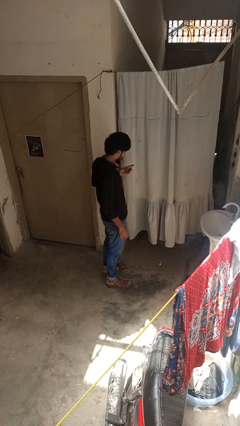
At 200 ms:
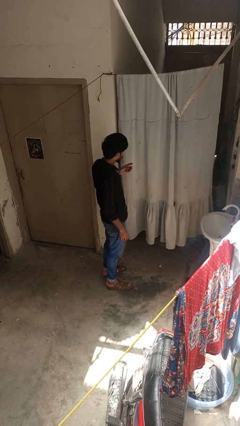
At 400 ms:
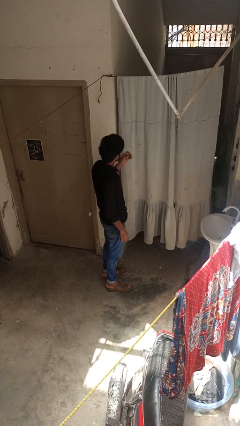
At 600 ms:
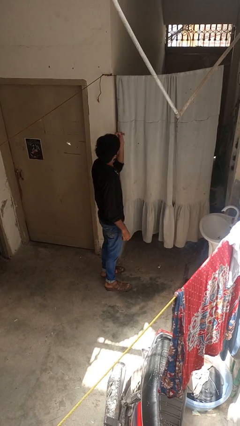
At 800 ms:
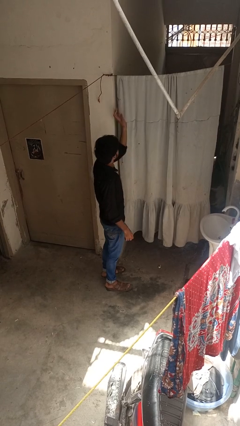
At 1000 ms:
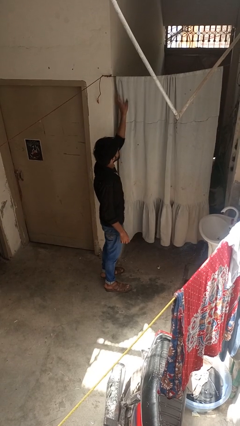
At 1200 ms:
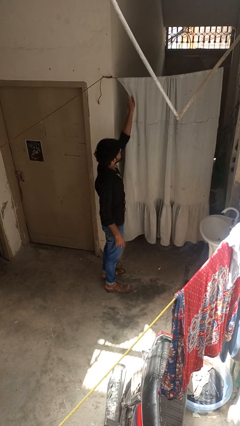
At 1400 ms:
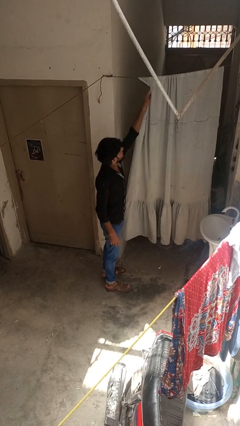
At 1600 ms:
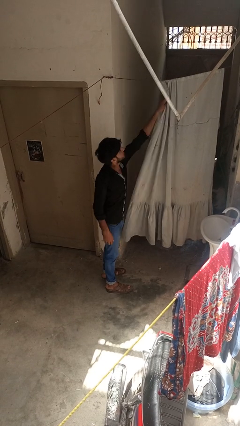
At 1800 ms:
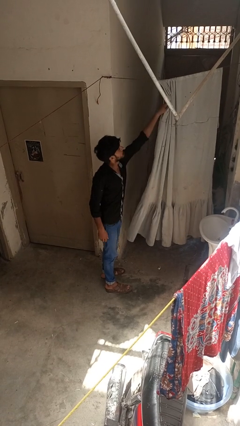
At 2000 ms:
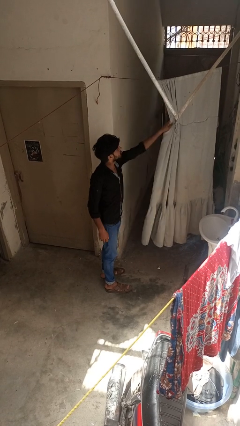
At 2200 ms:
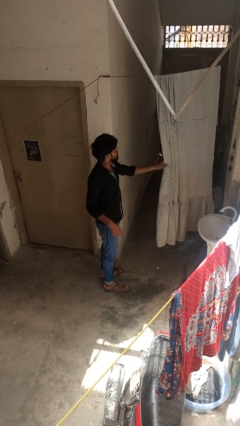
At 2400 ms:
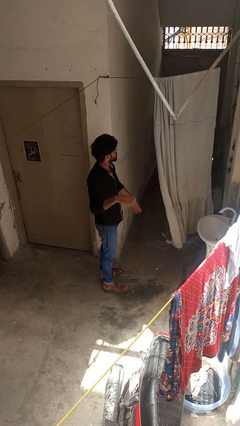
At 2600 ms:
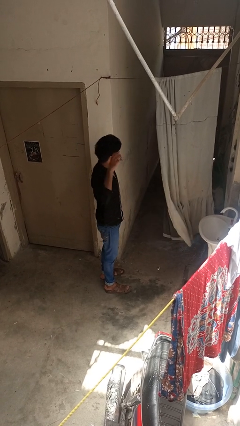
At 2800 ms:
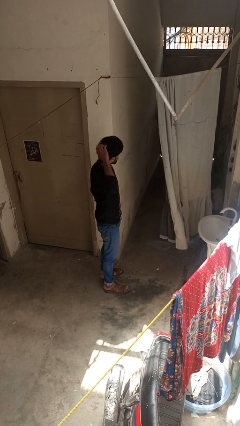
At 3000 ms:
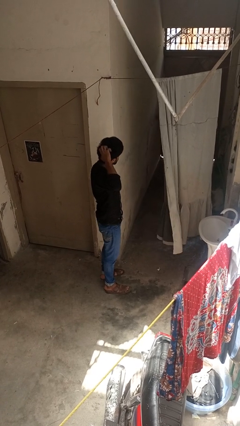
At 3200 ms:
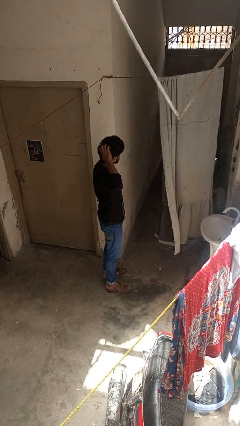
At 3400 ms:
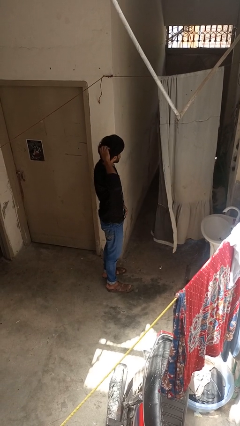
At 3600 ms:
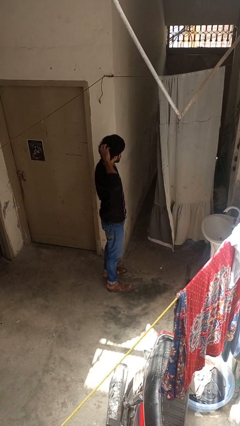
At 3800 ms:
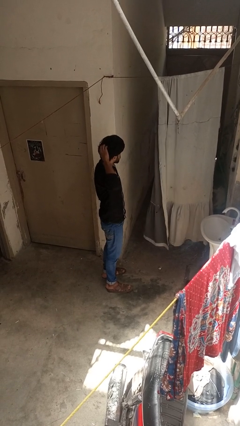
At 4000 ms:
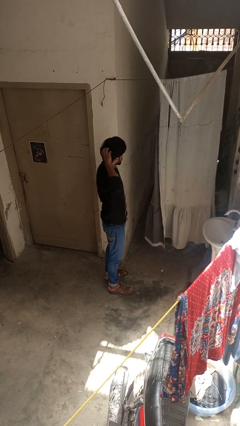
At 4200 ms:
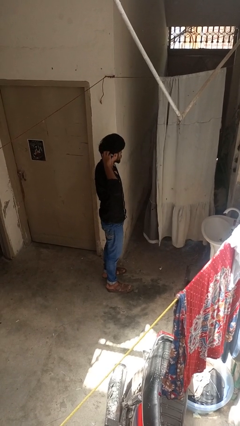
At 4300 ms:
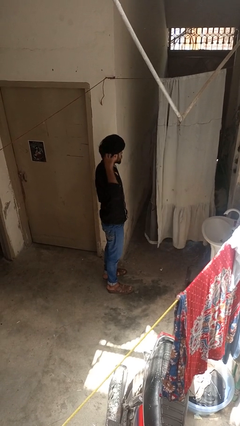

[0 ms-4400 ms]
person opens curtains

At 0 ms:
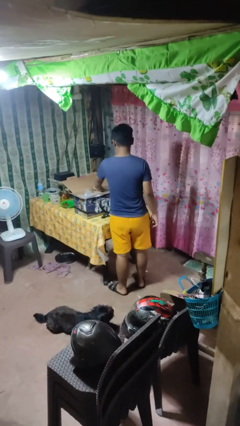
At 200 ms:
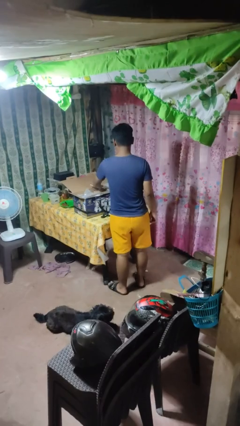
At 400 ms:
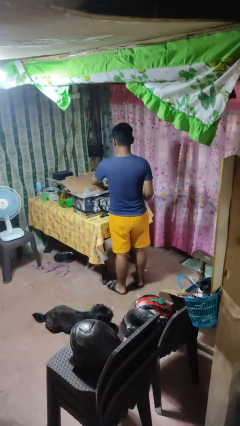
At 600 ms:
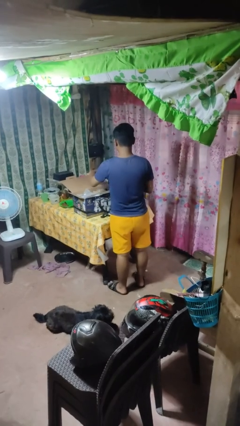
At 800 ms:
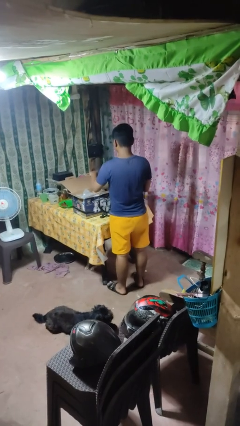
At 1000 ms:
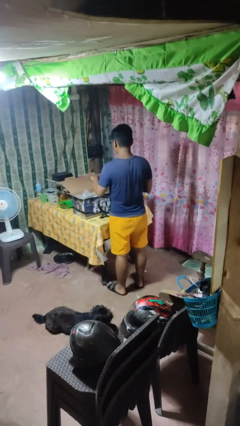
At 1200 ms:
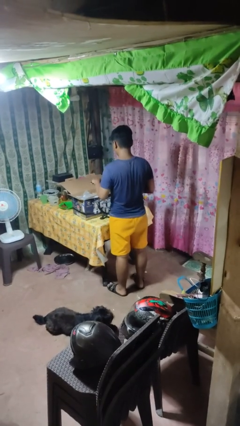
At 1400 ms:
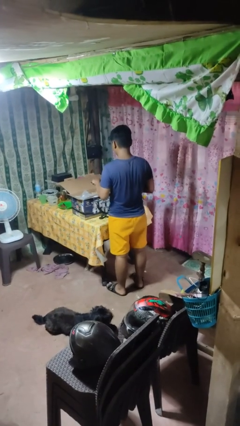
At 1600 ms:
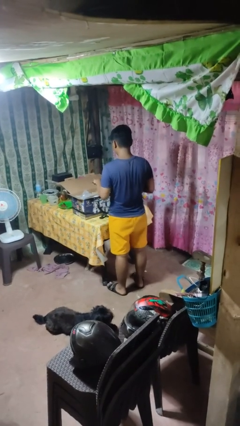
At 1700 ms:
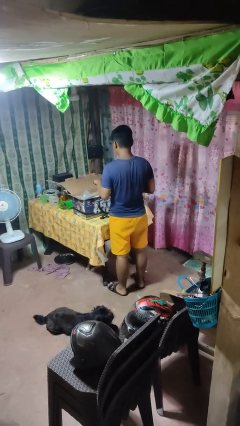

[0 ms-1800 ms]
person takes object from box

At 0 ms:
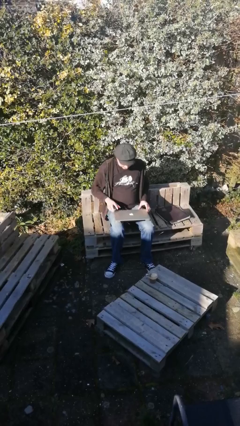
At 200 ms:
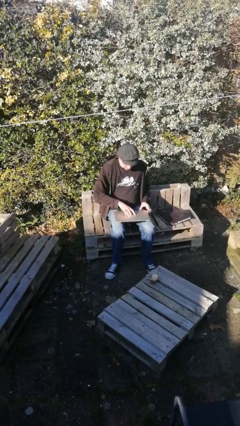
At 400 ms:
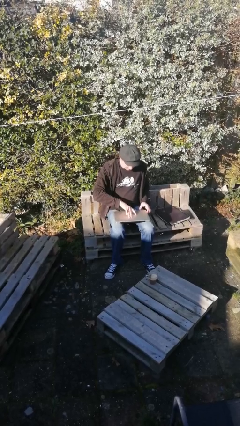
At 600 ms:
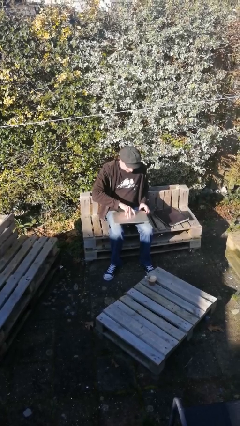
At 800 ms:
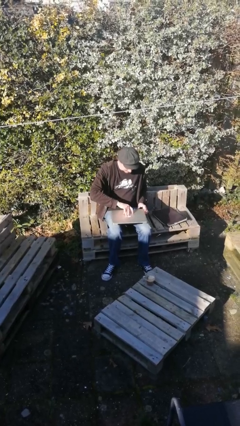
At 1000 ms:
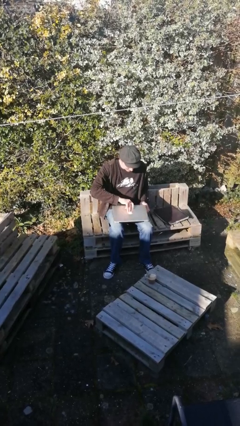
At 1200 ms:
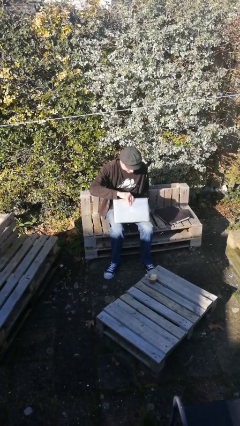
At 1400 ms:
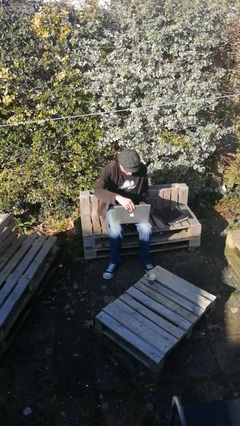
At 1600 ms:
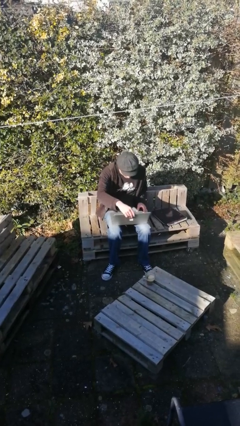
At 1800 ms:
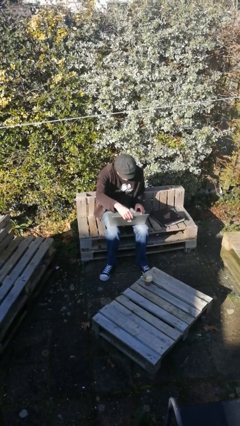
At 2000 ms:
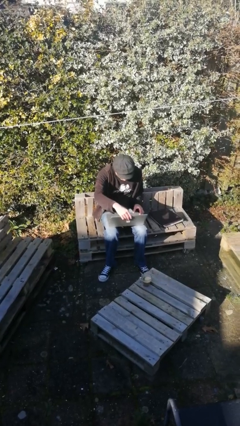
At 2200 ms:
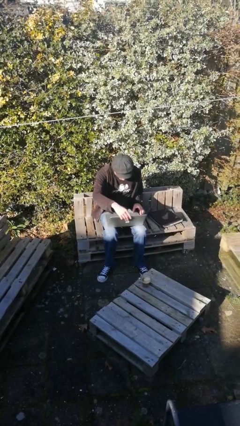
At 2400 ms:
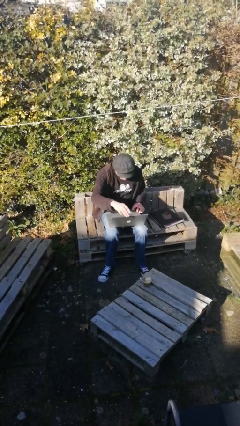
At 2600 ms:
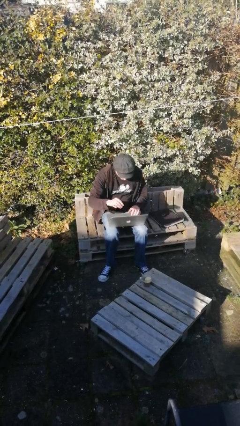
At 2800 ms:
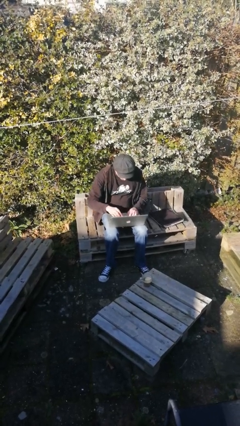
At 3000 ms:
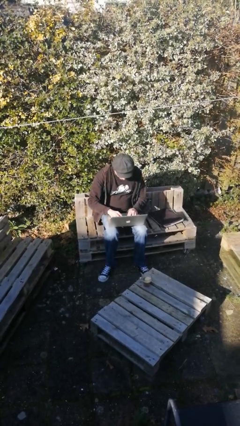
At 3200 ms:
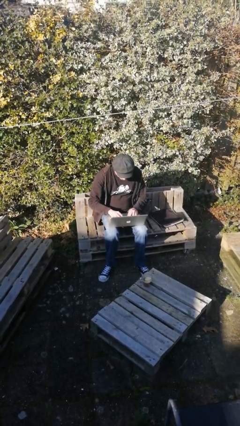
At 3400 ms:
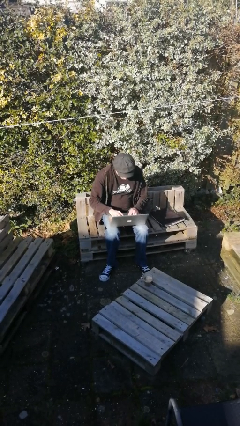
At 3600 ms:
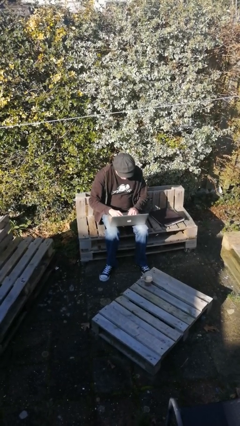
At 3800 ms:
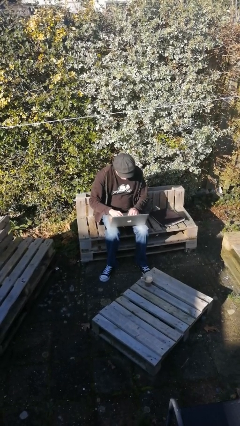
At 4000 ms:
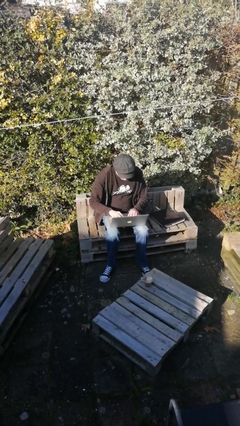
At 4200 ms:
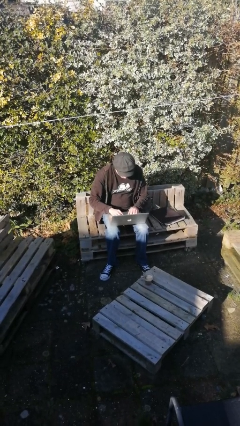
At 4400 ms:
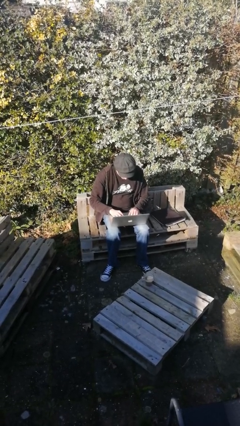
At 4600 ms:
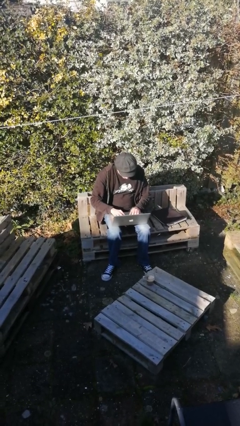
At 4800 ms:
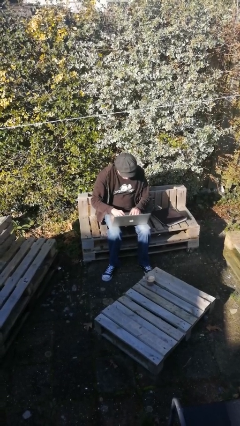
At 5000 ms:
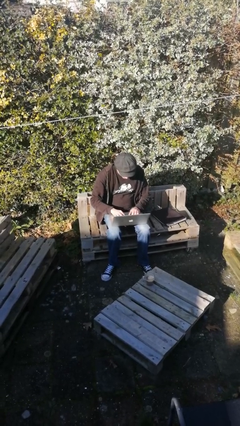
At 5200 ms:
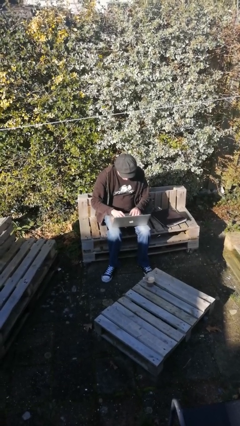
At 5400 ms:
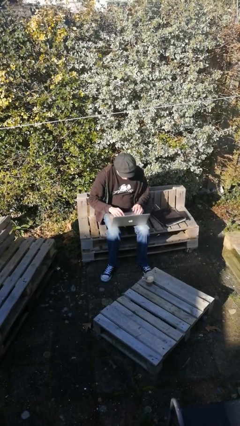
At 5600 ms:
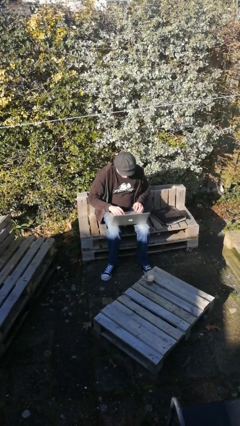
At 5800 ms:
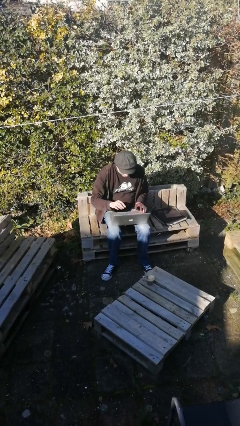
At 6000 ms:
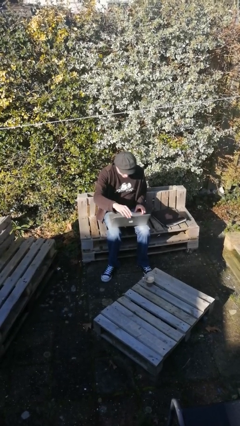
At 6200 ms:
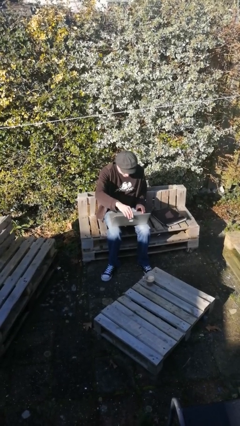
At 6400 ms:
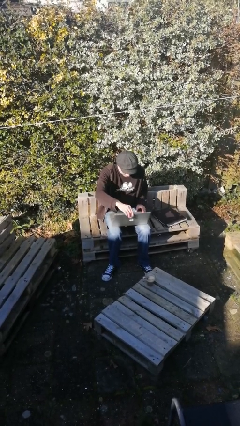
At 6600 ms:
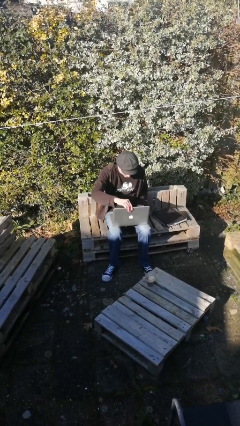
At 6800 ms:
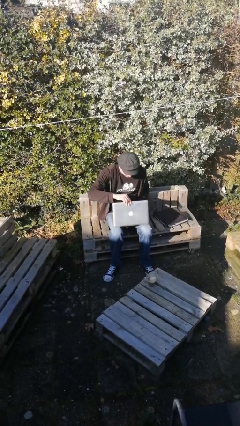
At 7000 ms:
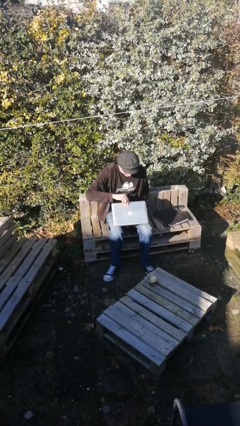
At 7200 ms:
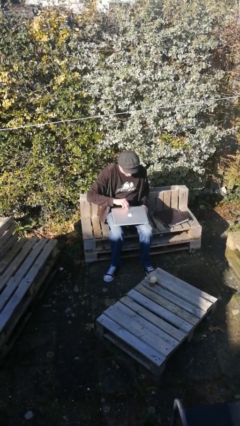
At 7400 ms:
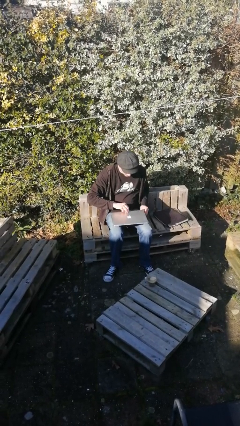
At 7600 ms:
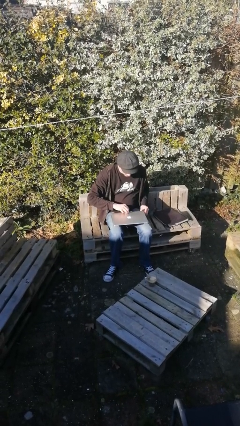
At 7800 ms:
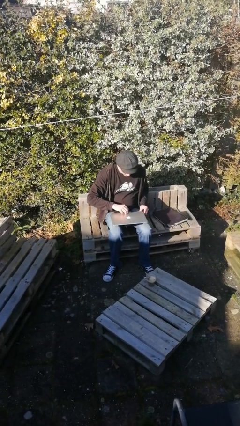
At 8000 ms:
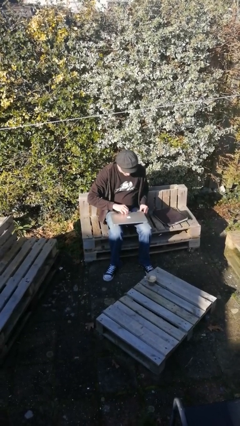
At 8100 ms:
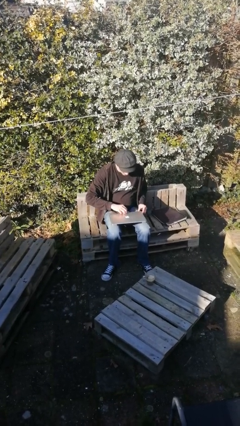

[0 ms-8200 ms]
person interacts with laptop

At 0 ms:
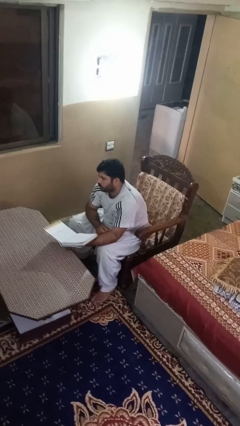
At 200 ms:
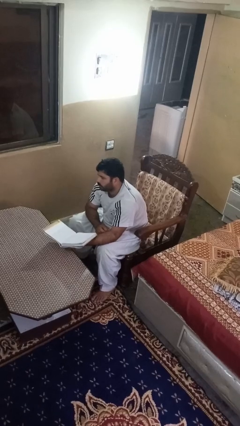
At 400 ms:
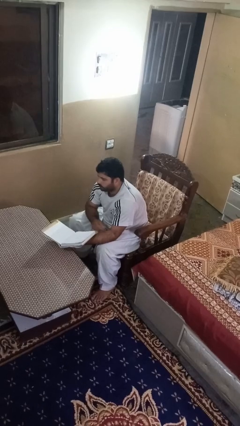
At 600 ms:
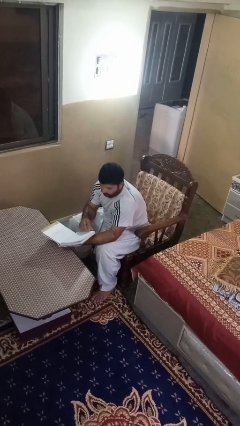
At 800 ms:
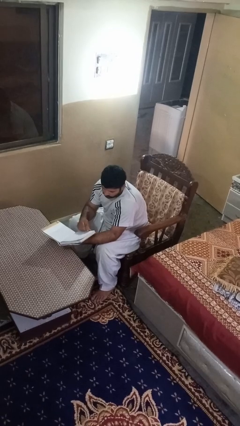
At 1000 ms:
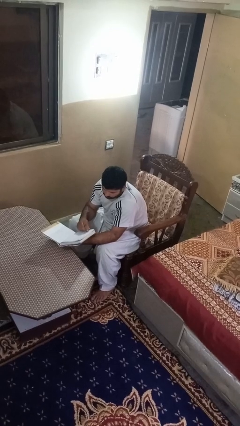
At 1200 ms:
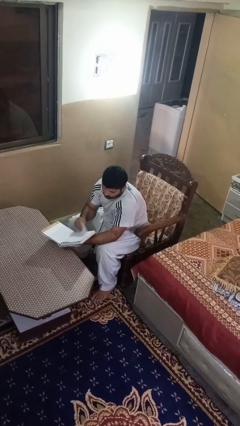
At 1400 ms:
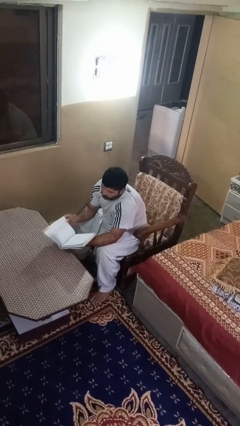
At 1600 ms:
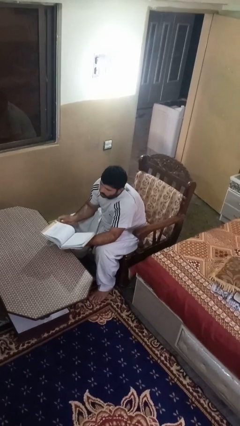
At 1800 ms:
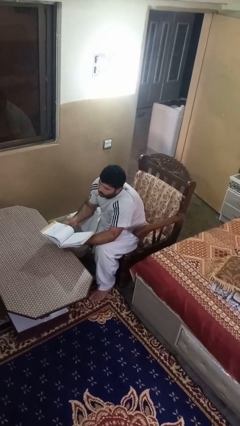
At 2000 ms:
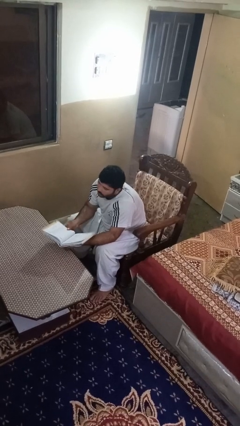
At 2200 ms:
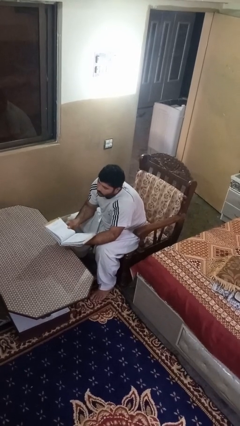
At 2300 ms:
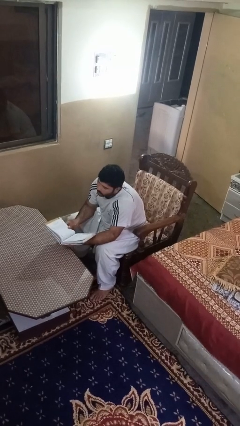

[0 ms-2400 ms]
person reads book

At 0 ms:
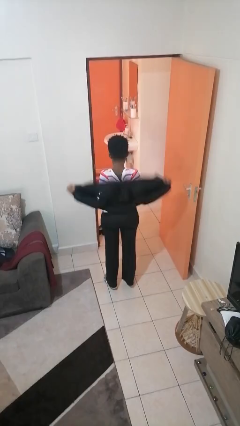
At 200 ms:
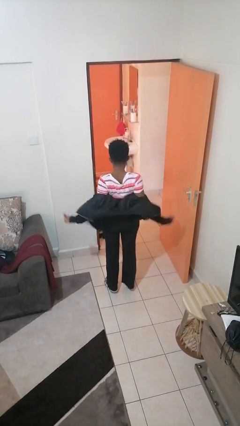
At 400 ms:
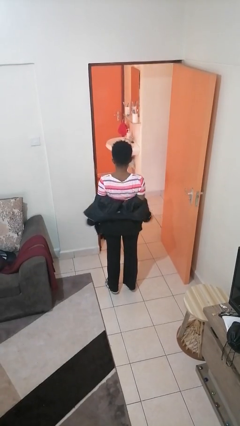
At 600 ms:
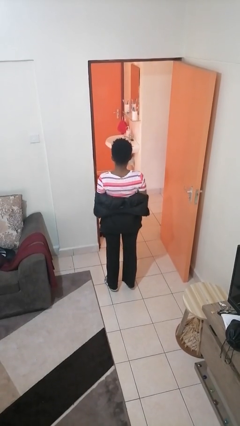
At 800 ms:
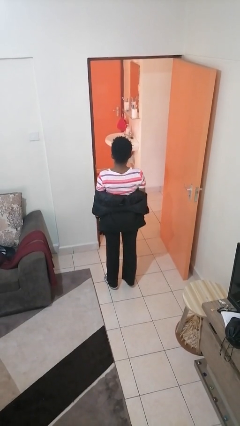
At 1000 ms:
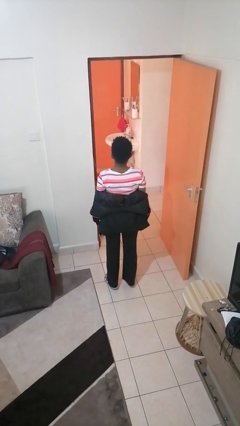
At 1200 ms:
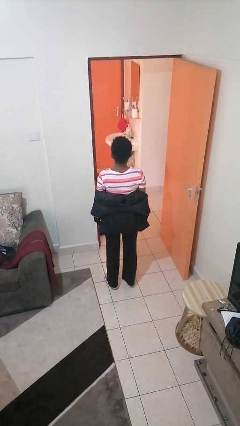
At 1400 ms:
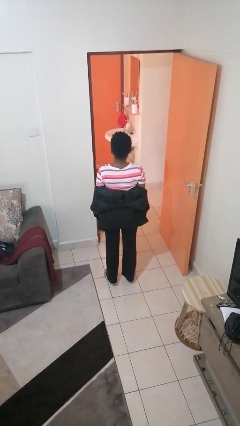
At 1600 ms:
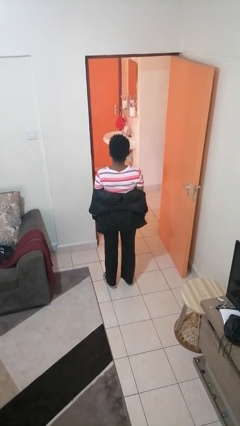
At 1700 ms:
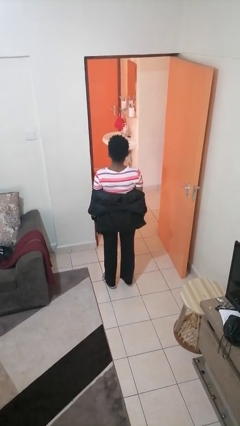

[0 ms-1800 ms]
person takes off jacket
